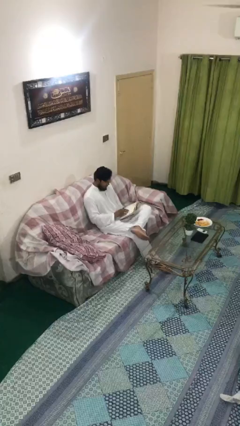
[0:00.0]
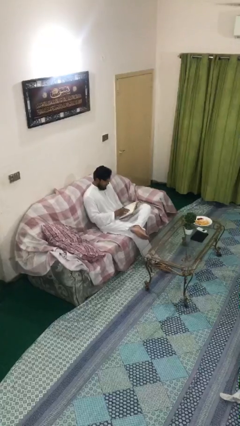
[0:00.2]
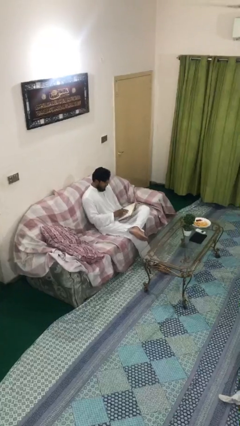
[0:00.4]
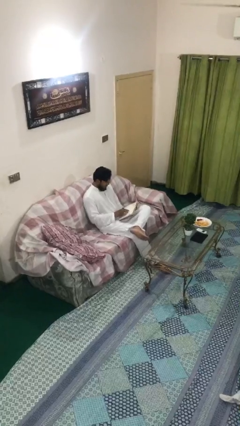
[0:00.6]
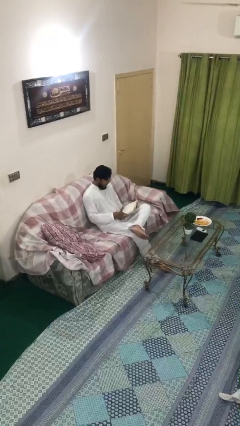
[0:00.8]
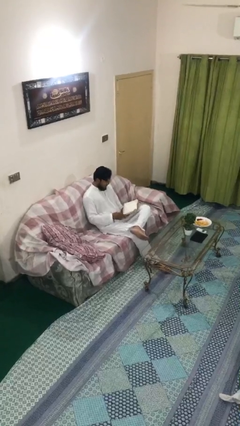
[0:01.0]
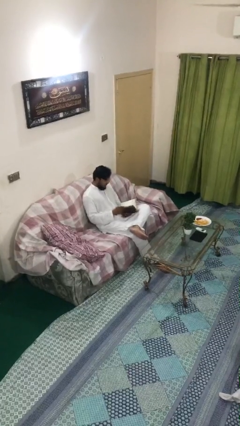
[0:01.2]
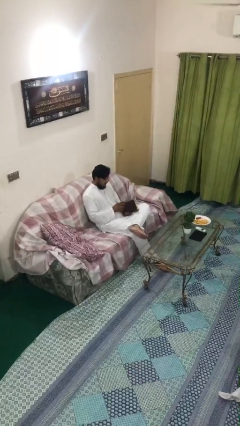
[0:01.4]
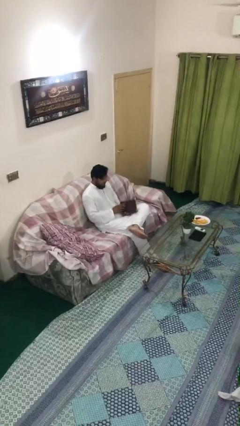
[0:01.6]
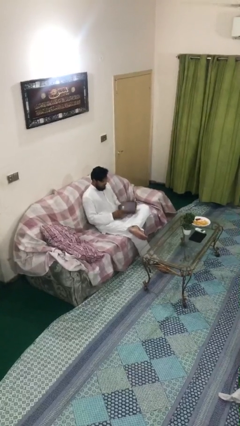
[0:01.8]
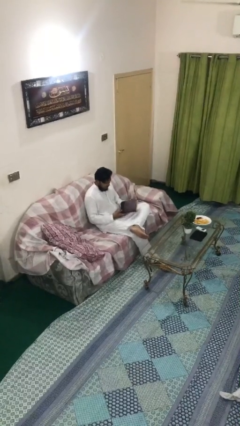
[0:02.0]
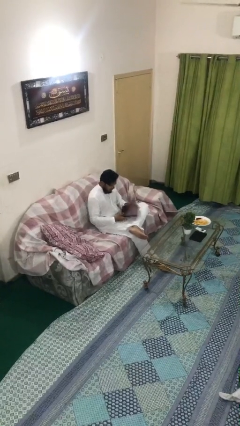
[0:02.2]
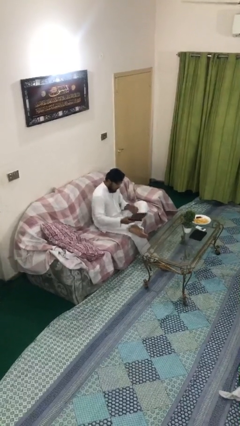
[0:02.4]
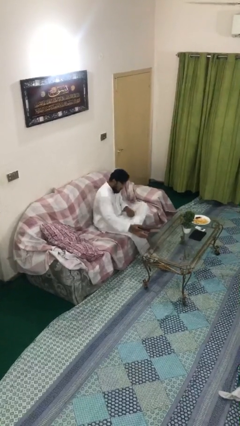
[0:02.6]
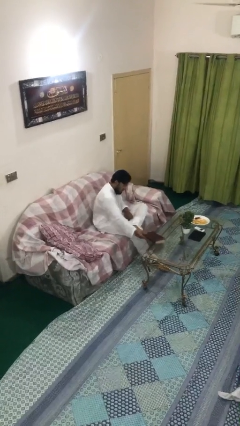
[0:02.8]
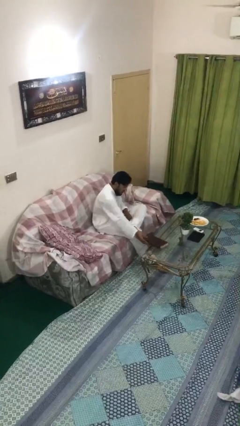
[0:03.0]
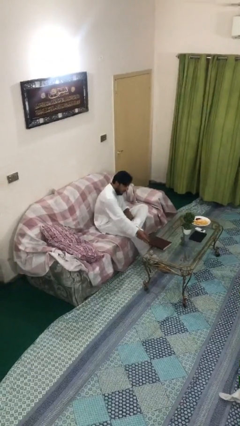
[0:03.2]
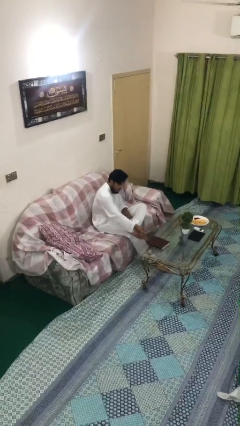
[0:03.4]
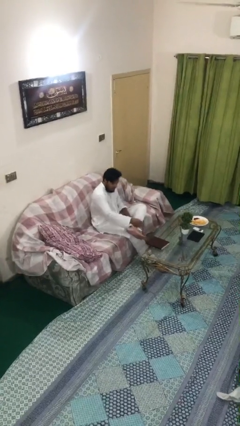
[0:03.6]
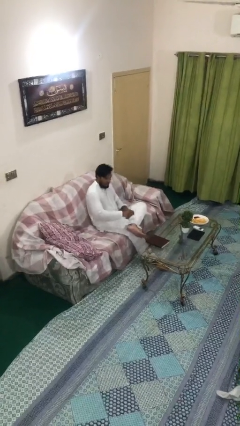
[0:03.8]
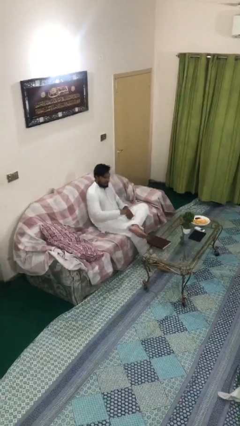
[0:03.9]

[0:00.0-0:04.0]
person puts down object on table

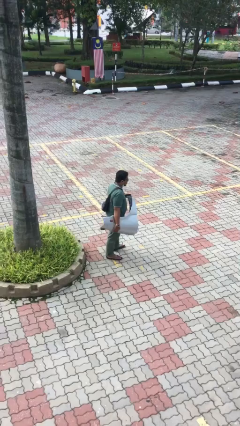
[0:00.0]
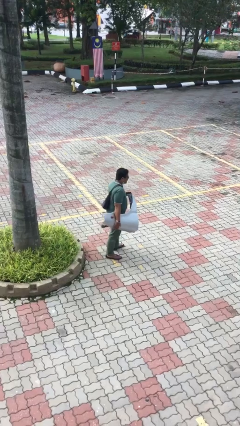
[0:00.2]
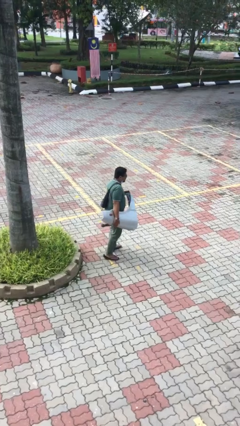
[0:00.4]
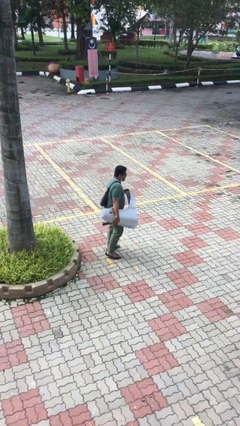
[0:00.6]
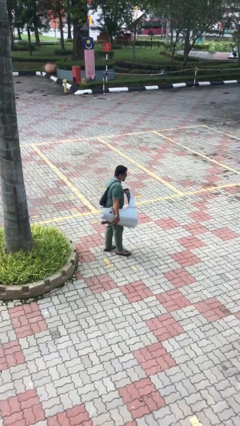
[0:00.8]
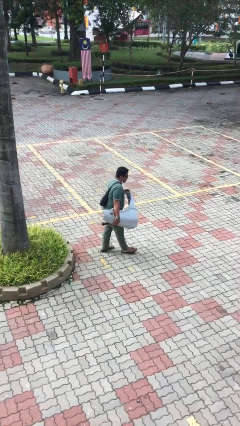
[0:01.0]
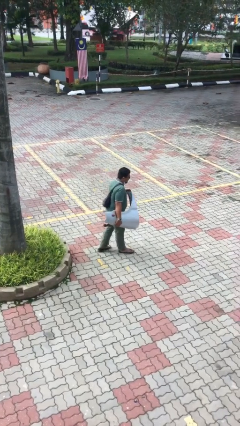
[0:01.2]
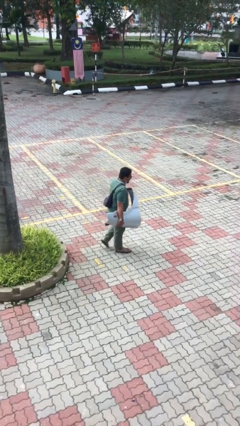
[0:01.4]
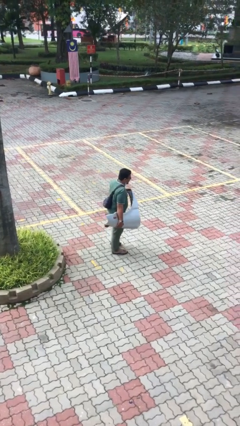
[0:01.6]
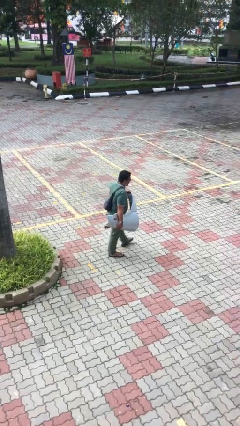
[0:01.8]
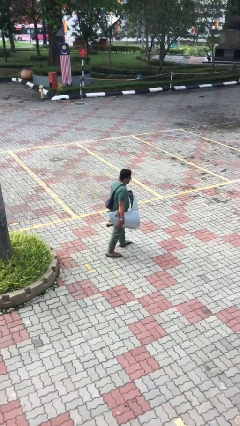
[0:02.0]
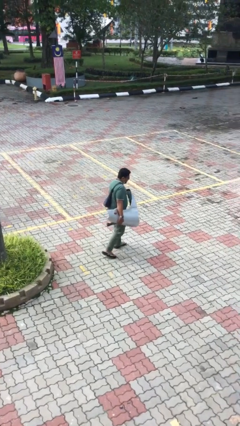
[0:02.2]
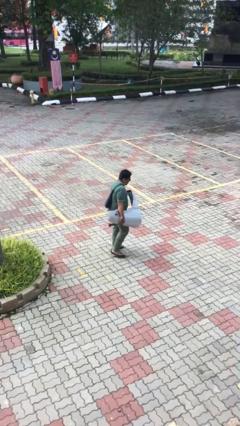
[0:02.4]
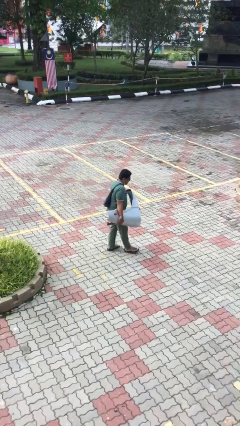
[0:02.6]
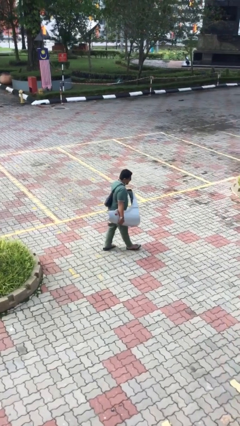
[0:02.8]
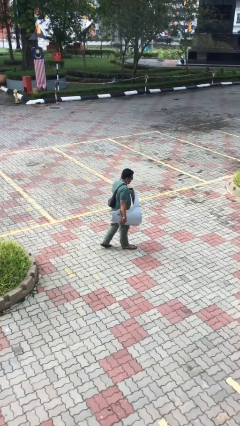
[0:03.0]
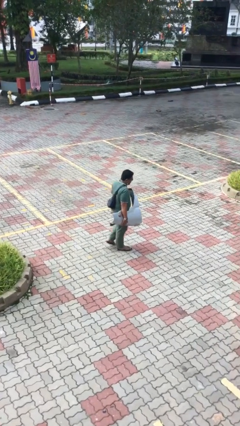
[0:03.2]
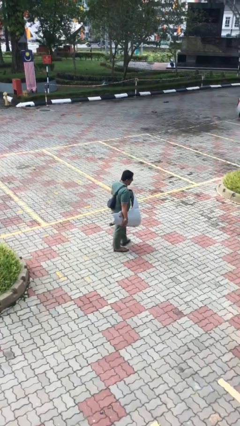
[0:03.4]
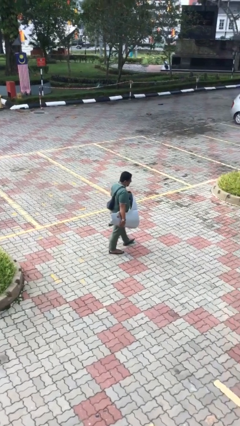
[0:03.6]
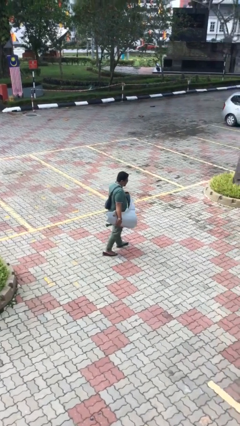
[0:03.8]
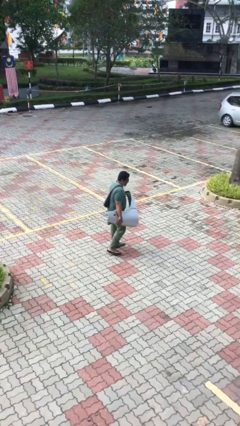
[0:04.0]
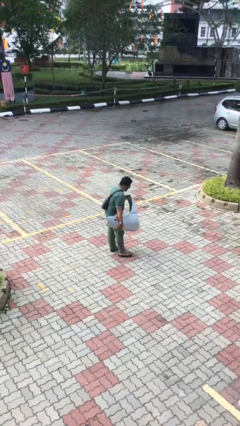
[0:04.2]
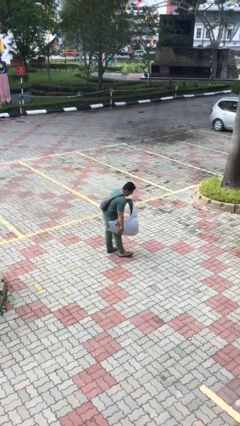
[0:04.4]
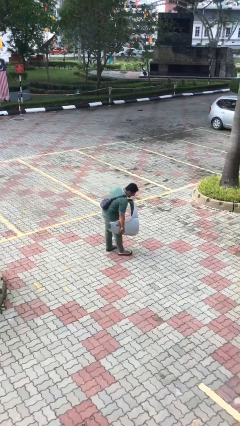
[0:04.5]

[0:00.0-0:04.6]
person carries heavy object

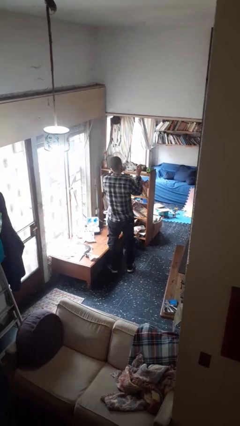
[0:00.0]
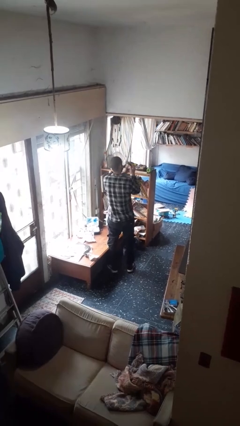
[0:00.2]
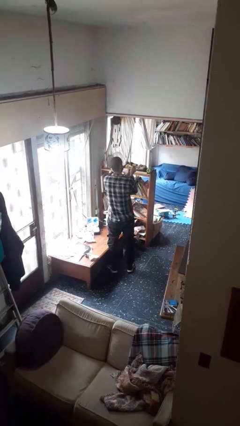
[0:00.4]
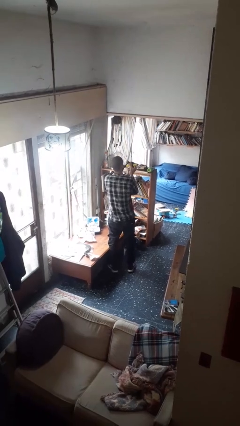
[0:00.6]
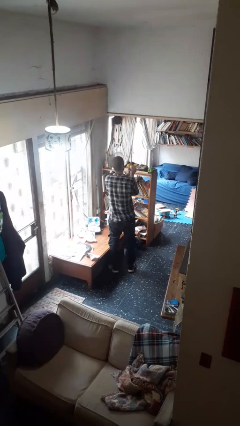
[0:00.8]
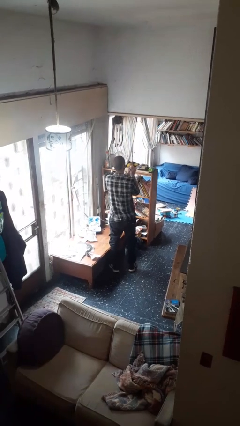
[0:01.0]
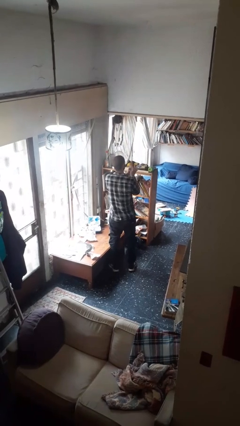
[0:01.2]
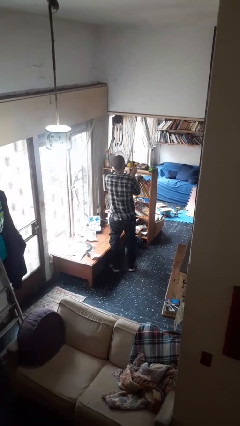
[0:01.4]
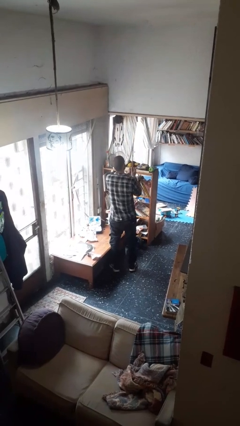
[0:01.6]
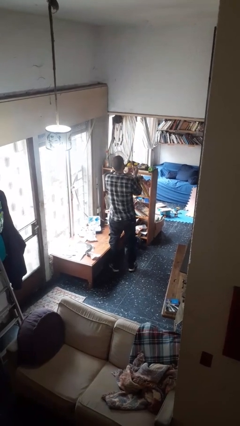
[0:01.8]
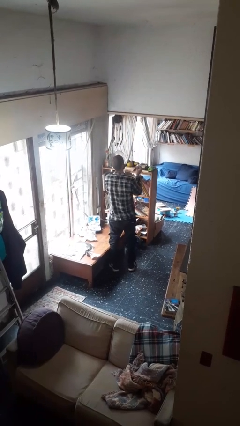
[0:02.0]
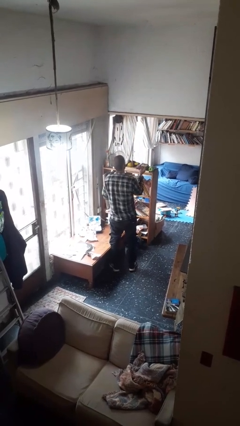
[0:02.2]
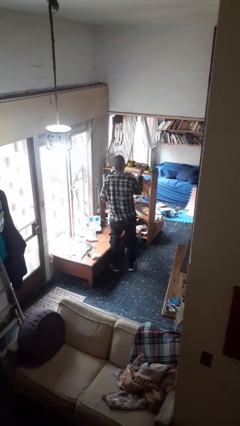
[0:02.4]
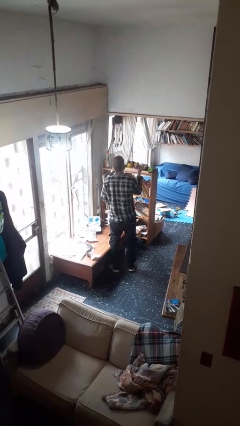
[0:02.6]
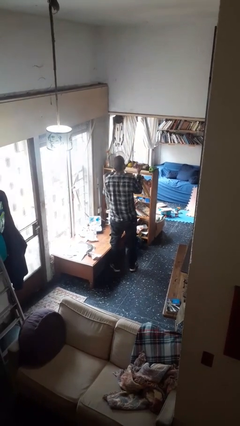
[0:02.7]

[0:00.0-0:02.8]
person crumples paper

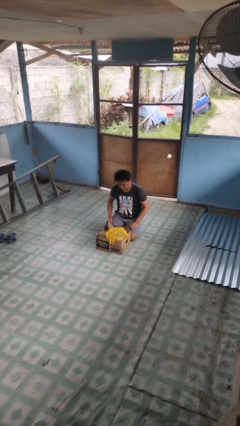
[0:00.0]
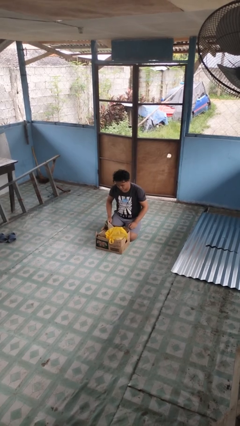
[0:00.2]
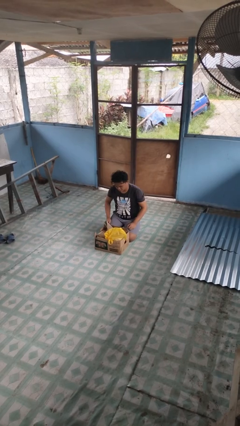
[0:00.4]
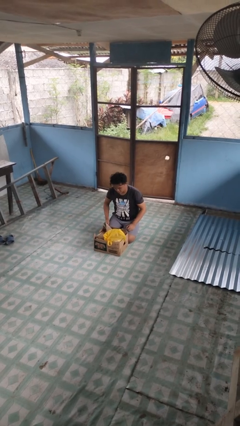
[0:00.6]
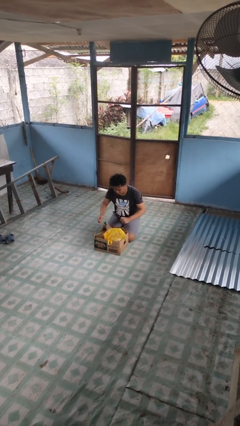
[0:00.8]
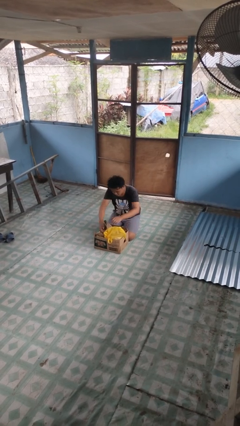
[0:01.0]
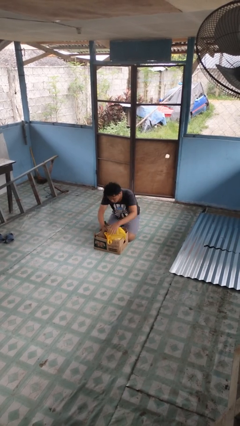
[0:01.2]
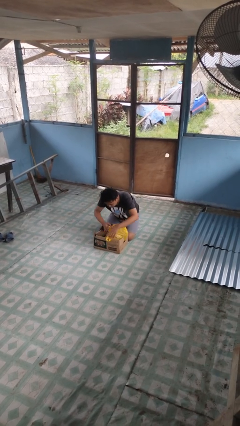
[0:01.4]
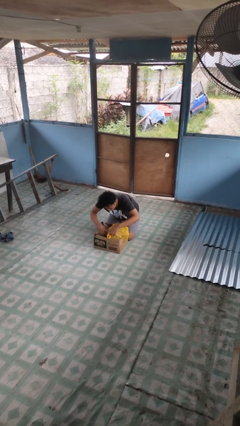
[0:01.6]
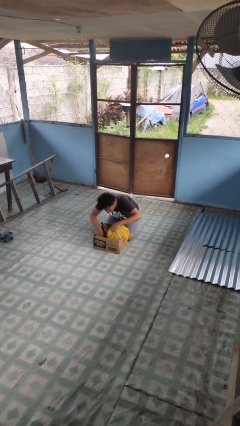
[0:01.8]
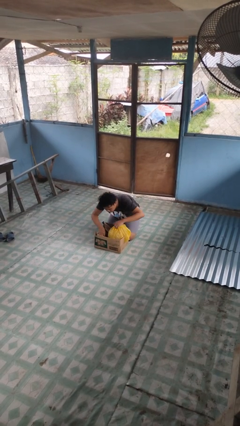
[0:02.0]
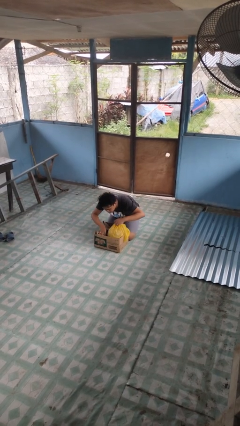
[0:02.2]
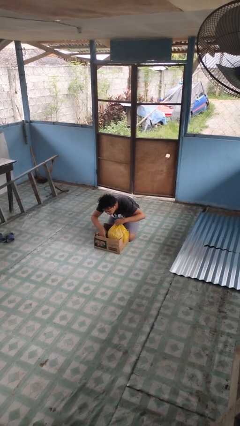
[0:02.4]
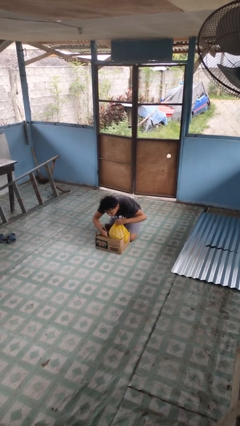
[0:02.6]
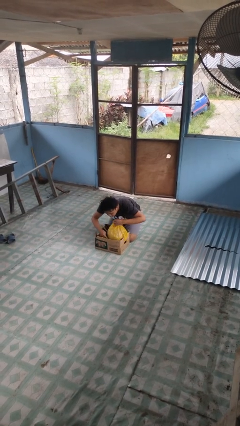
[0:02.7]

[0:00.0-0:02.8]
person searches in box

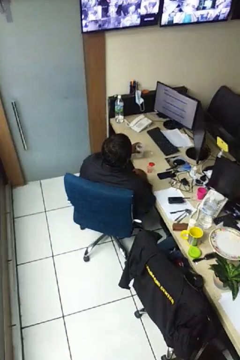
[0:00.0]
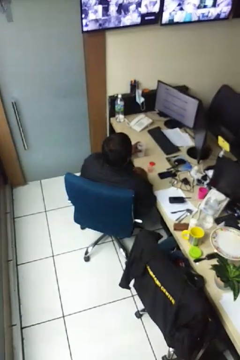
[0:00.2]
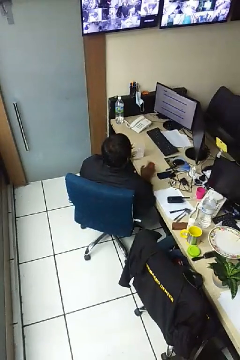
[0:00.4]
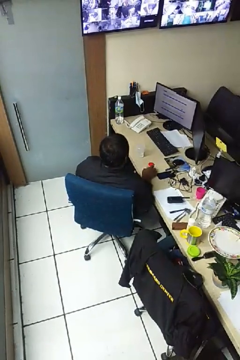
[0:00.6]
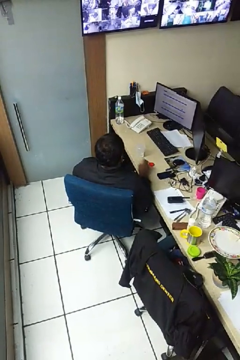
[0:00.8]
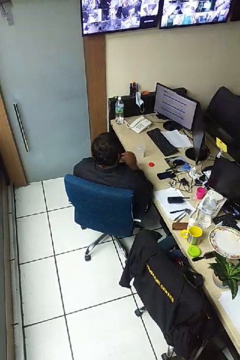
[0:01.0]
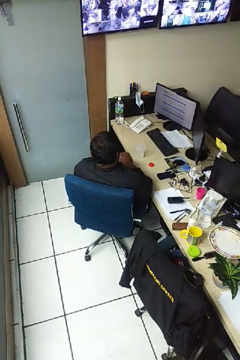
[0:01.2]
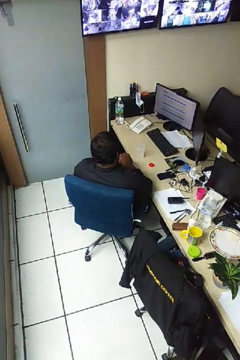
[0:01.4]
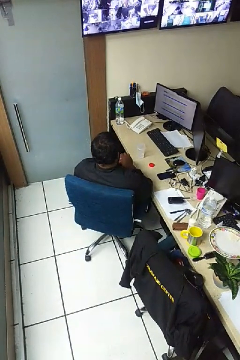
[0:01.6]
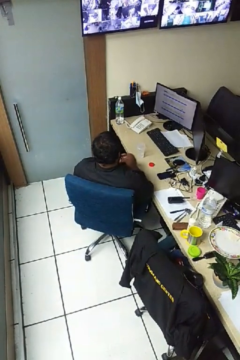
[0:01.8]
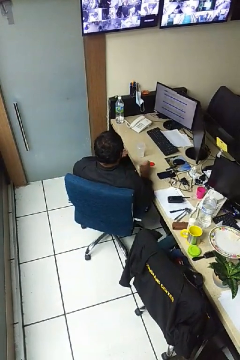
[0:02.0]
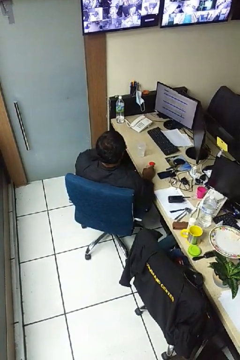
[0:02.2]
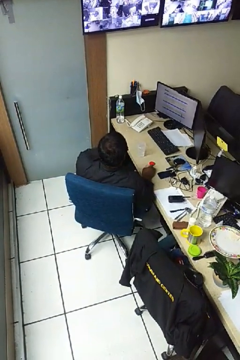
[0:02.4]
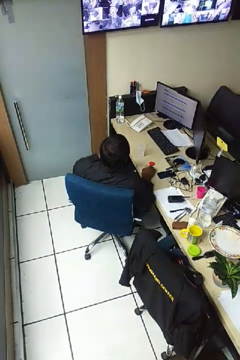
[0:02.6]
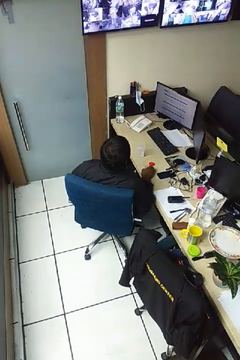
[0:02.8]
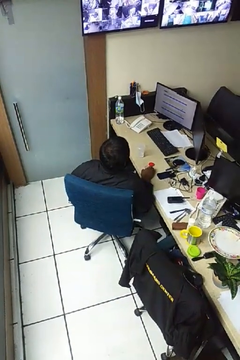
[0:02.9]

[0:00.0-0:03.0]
person takes medicine pills

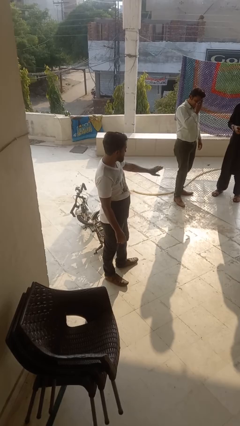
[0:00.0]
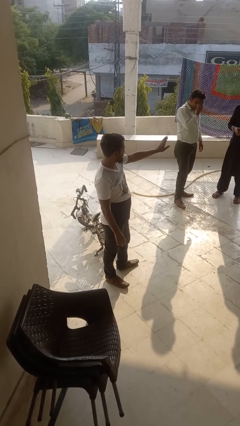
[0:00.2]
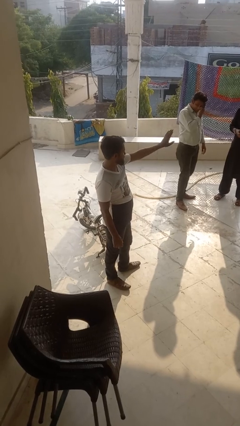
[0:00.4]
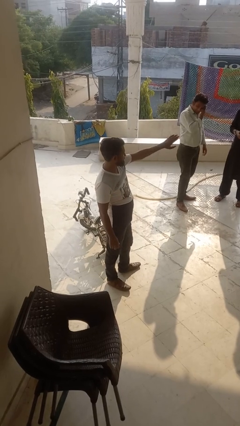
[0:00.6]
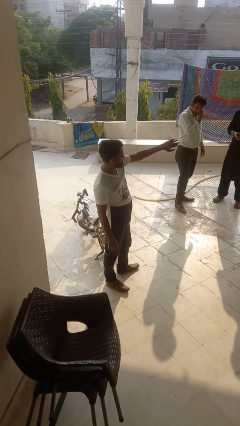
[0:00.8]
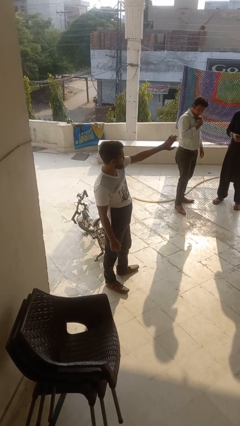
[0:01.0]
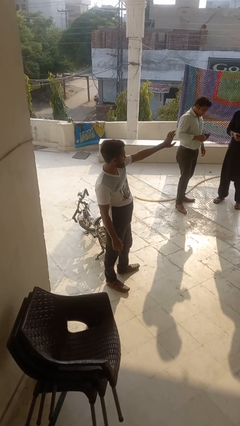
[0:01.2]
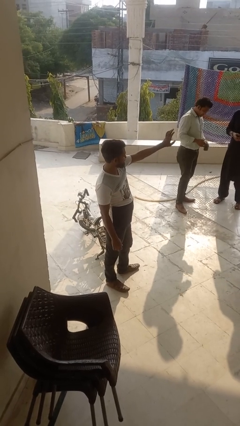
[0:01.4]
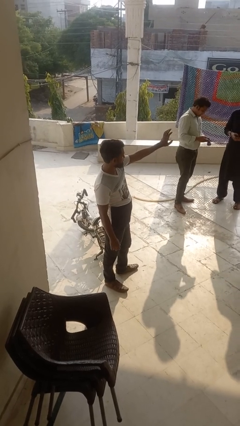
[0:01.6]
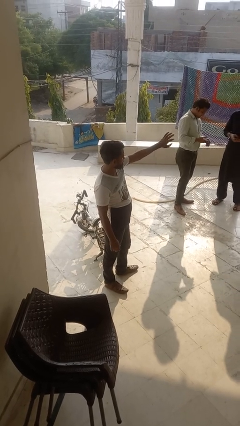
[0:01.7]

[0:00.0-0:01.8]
person waves at person
